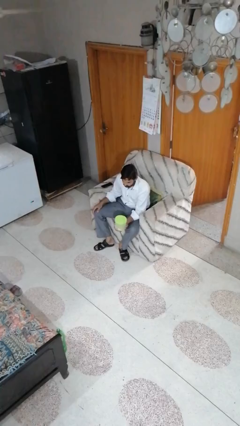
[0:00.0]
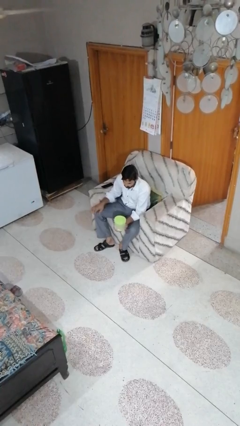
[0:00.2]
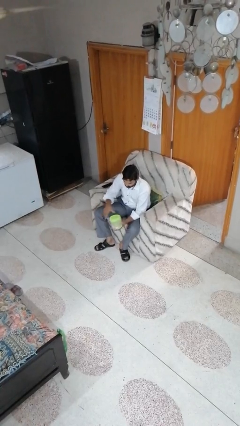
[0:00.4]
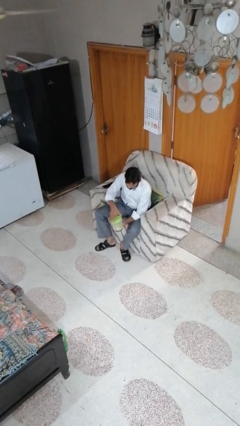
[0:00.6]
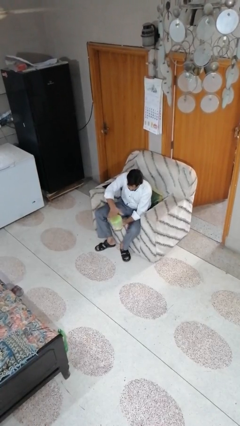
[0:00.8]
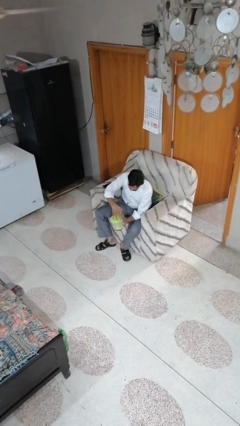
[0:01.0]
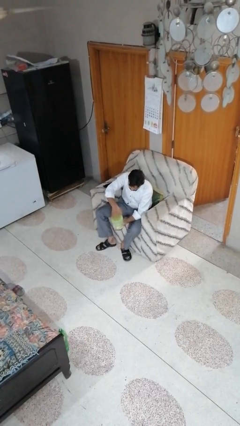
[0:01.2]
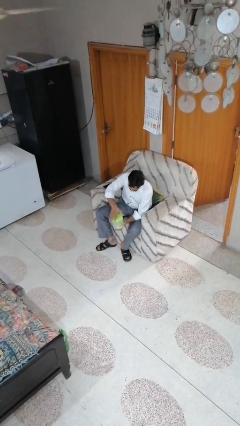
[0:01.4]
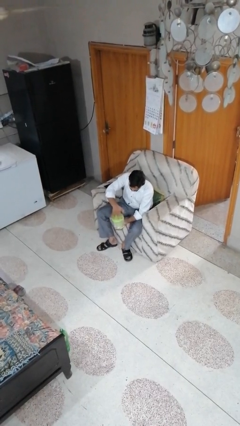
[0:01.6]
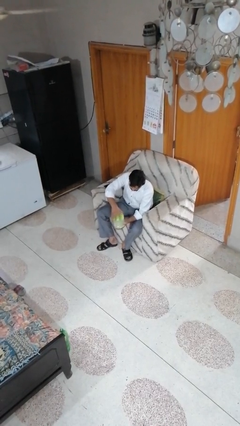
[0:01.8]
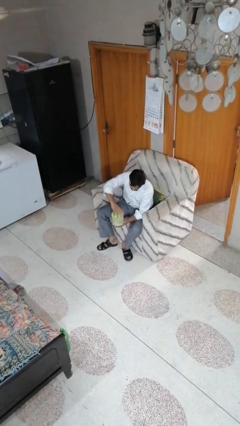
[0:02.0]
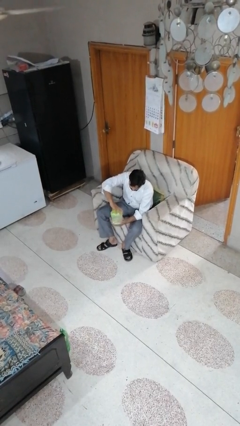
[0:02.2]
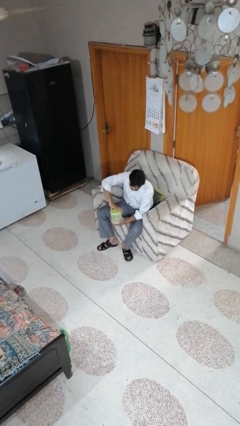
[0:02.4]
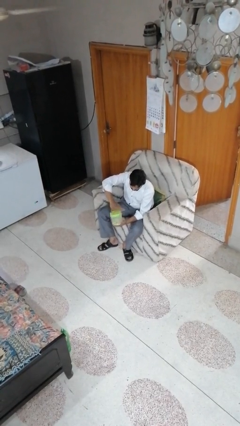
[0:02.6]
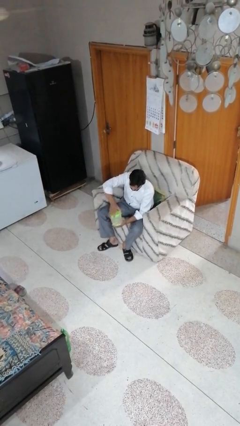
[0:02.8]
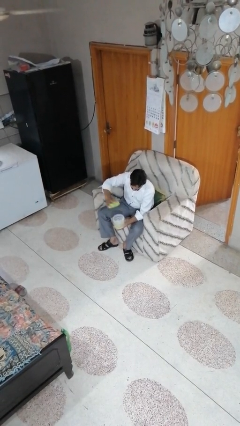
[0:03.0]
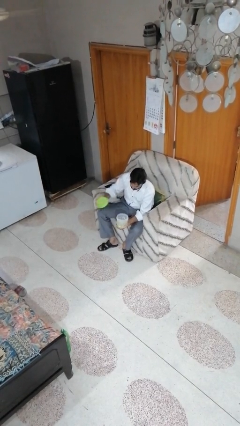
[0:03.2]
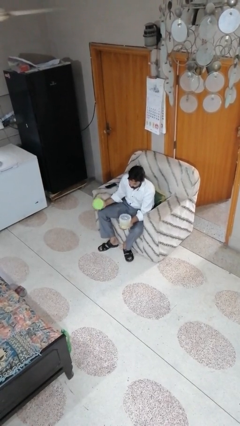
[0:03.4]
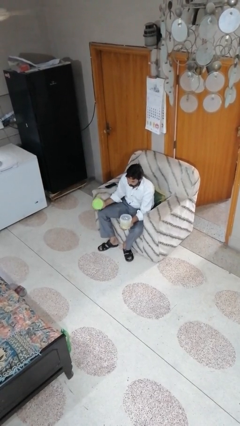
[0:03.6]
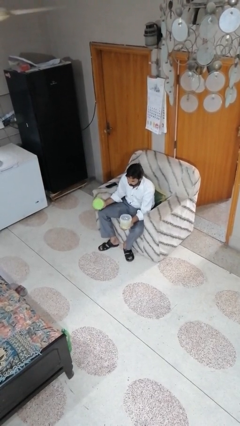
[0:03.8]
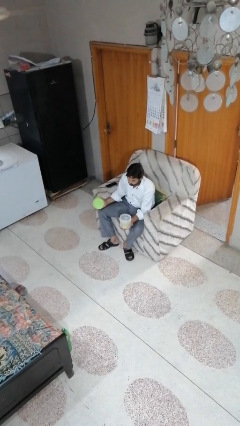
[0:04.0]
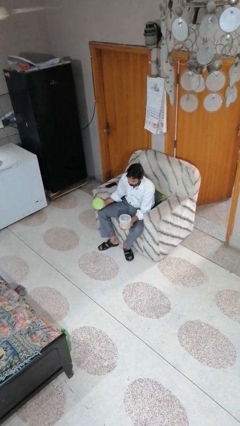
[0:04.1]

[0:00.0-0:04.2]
person opens jar

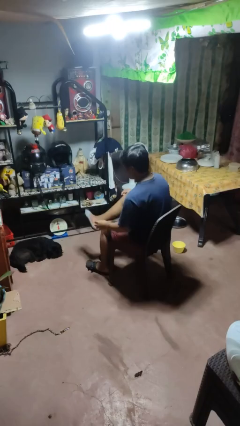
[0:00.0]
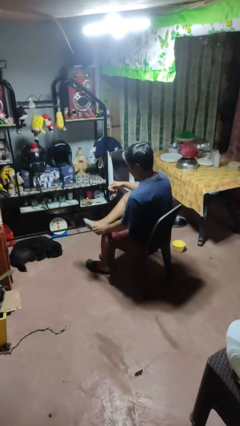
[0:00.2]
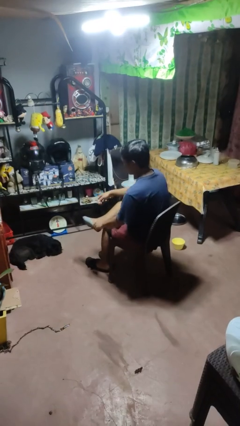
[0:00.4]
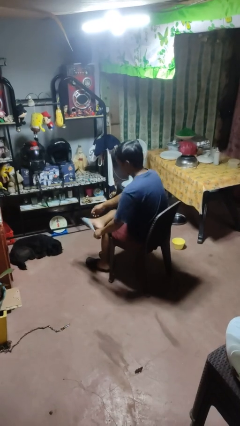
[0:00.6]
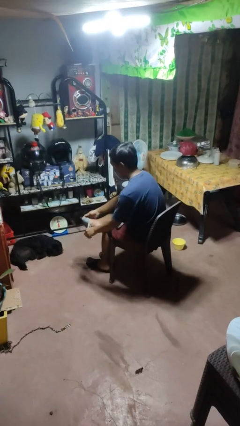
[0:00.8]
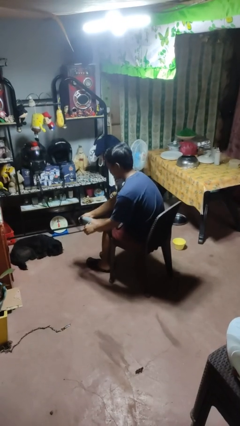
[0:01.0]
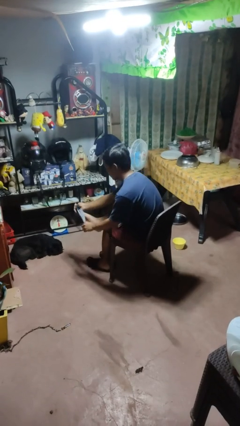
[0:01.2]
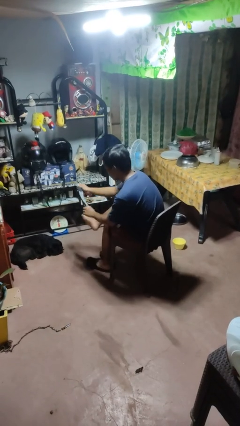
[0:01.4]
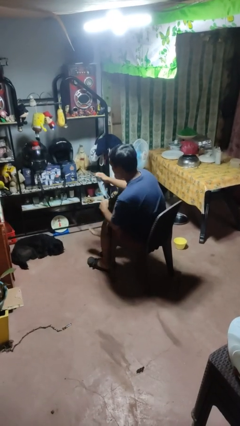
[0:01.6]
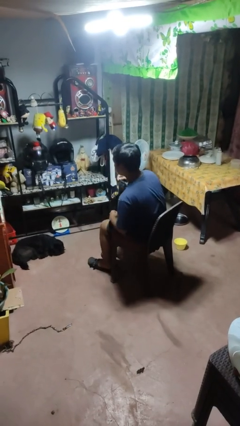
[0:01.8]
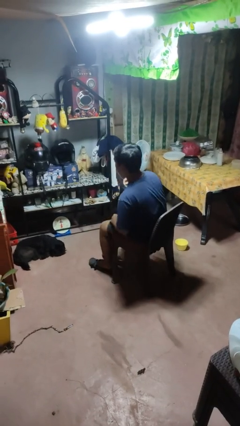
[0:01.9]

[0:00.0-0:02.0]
person takes off socks

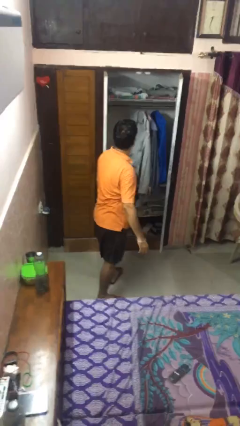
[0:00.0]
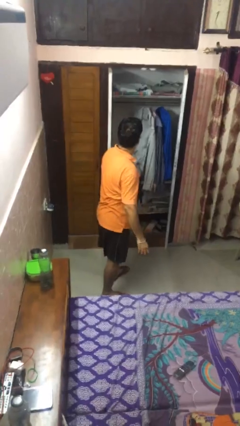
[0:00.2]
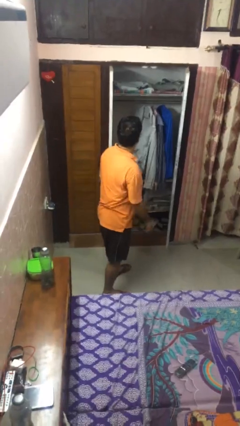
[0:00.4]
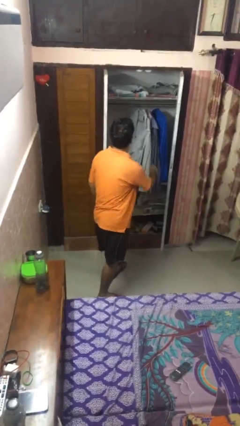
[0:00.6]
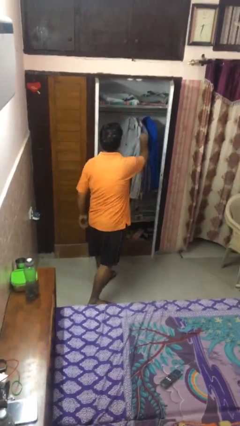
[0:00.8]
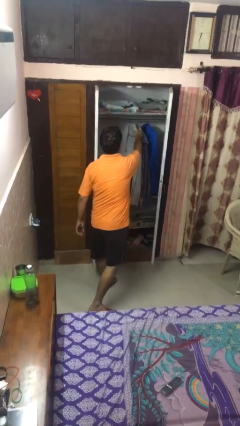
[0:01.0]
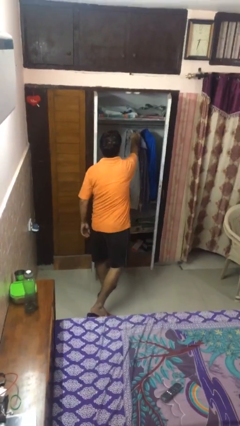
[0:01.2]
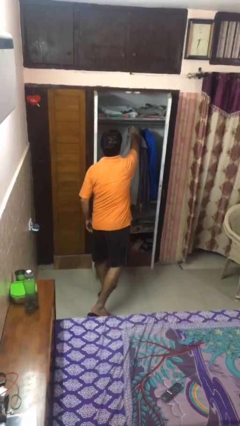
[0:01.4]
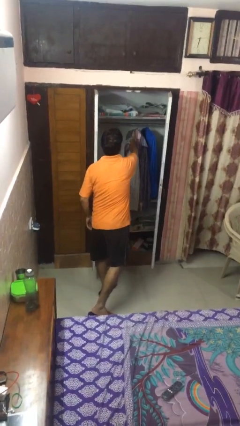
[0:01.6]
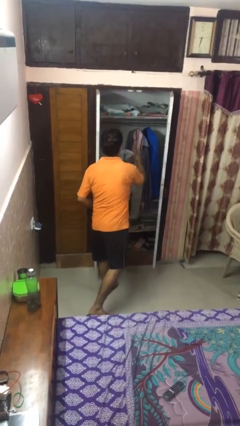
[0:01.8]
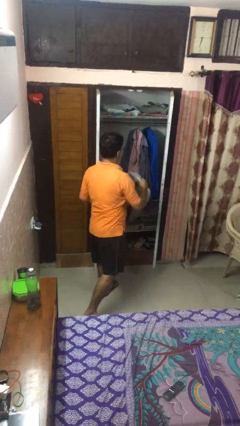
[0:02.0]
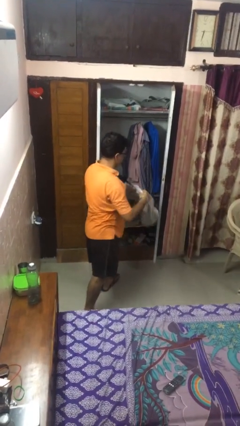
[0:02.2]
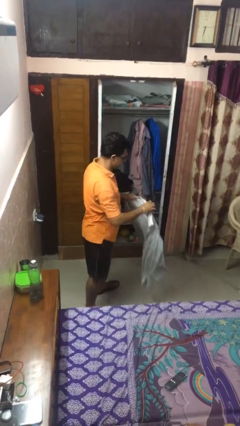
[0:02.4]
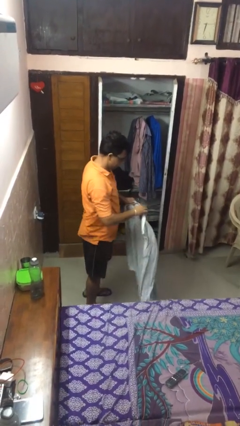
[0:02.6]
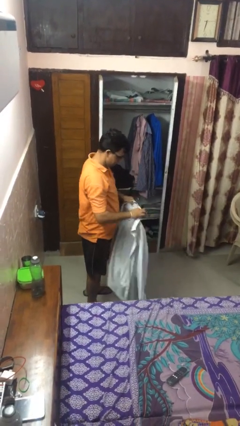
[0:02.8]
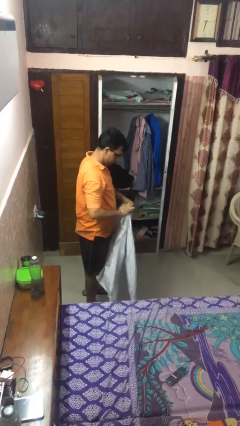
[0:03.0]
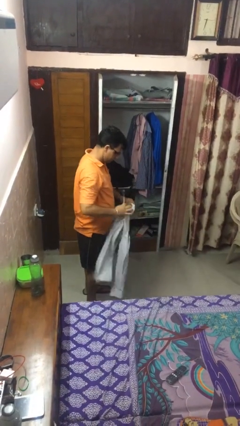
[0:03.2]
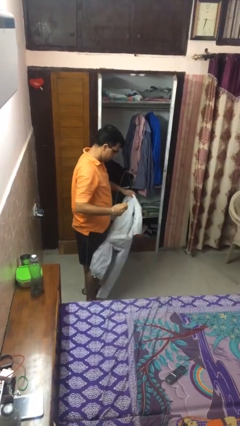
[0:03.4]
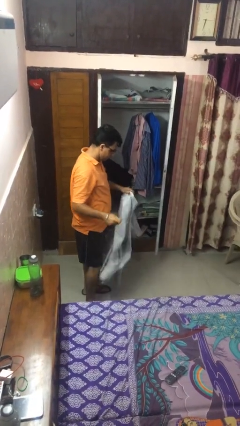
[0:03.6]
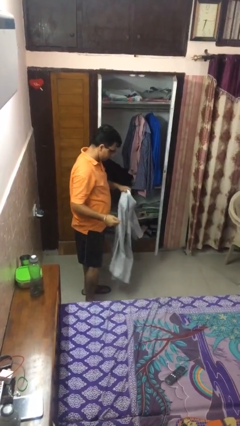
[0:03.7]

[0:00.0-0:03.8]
person takes clothes from closet

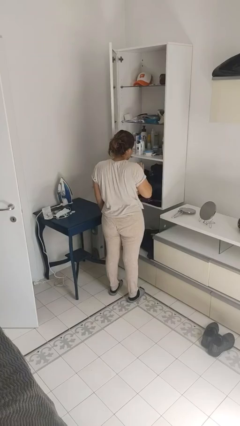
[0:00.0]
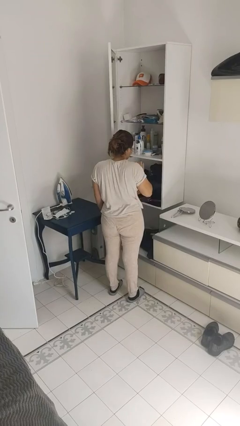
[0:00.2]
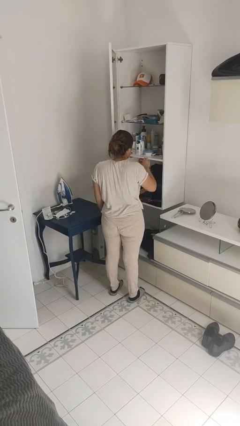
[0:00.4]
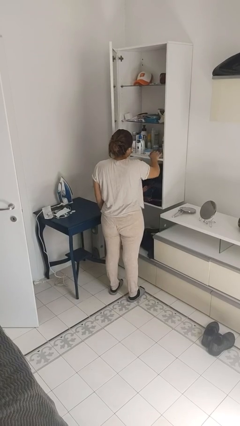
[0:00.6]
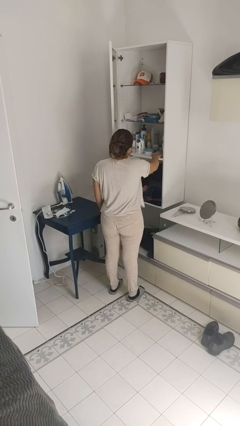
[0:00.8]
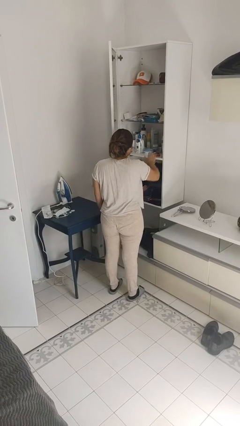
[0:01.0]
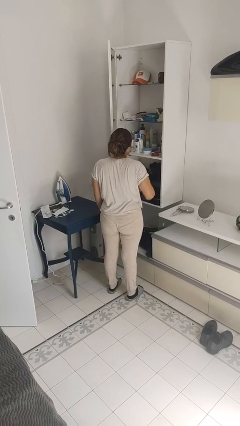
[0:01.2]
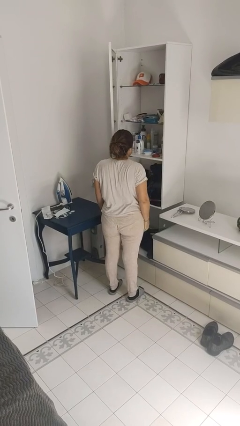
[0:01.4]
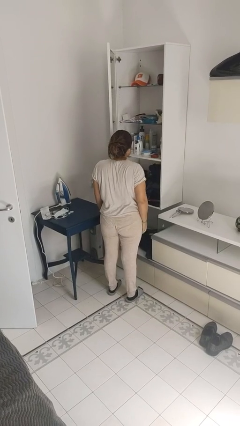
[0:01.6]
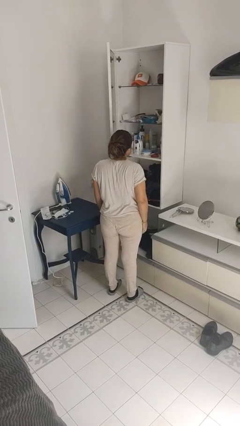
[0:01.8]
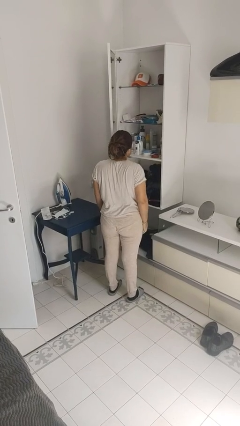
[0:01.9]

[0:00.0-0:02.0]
person puts down object on shelf

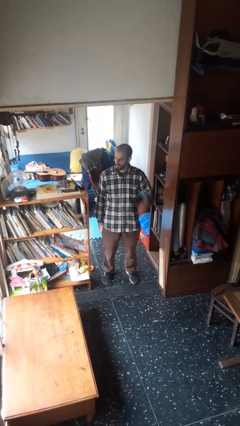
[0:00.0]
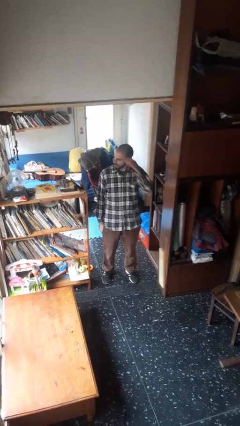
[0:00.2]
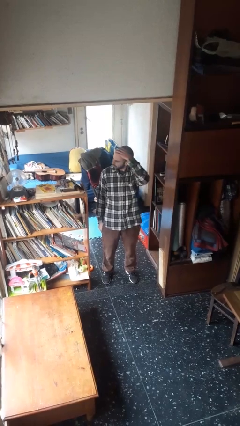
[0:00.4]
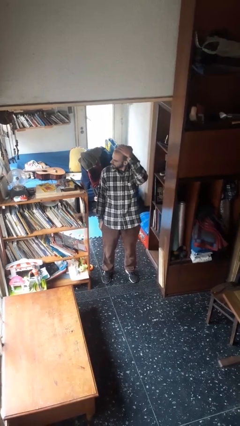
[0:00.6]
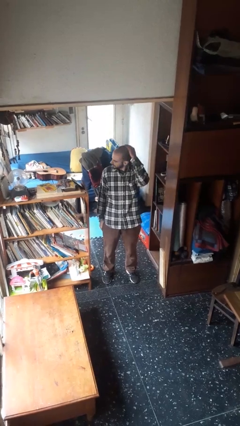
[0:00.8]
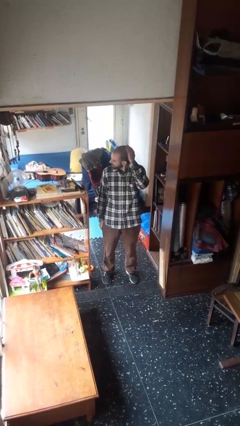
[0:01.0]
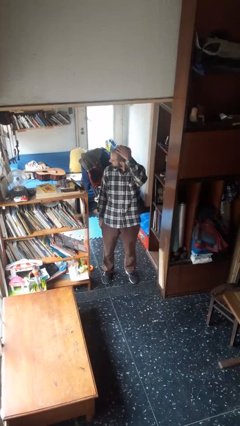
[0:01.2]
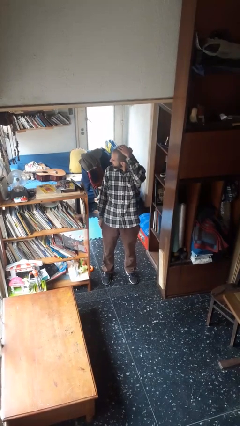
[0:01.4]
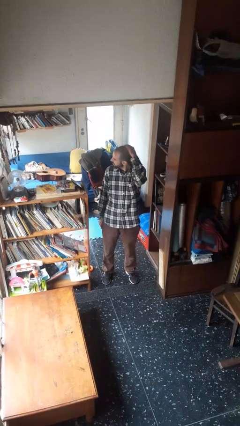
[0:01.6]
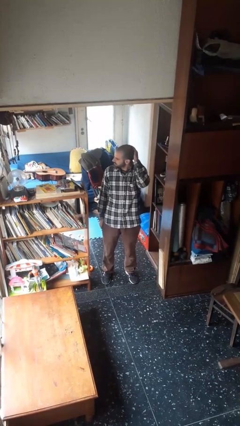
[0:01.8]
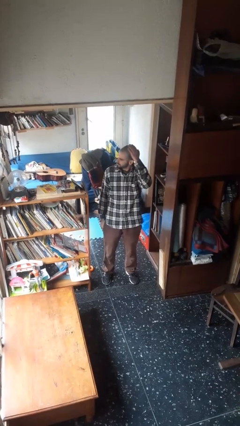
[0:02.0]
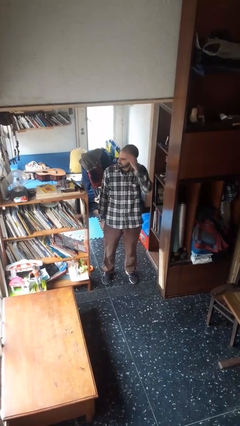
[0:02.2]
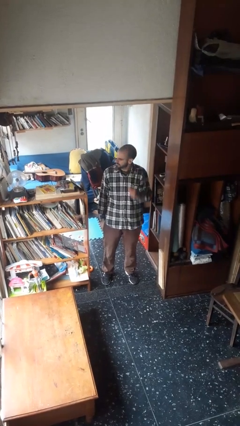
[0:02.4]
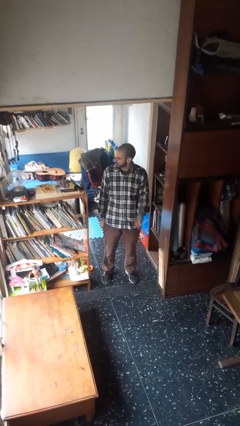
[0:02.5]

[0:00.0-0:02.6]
person pats head

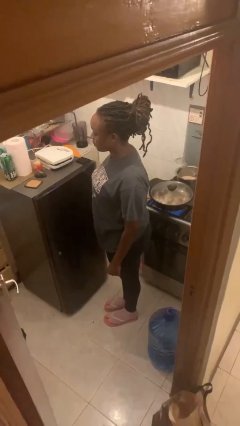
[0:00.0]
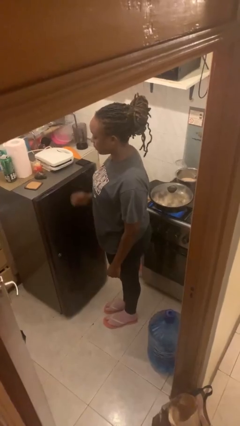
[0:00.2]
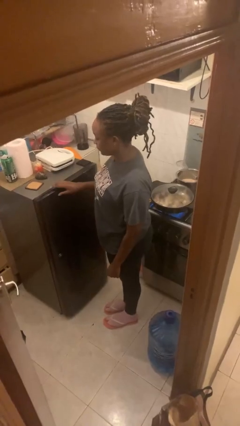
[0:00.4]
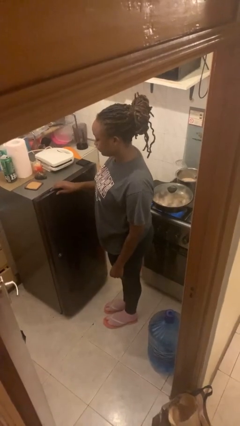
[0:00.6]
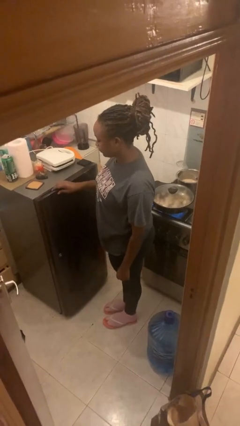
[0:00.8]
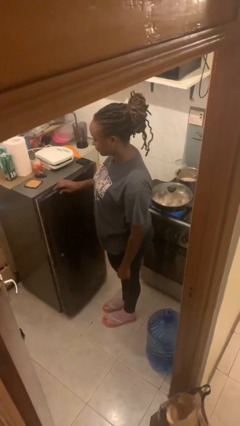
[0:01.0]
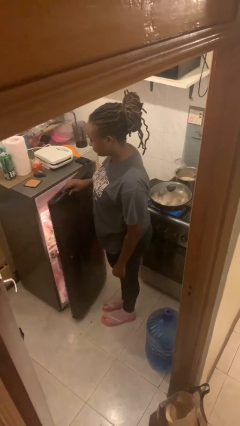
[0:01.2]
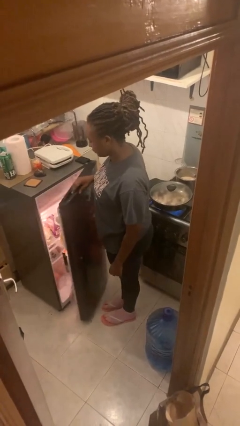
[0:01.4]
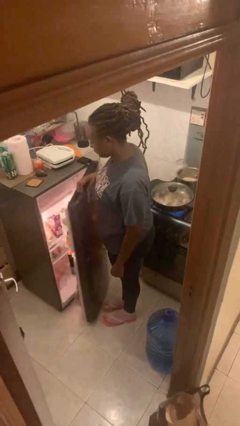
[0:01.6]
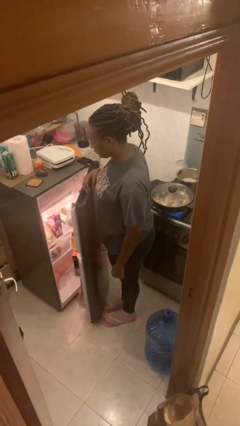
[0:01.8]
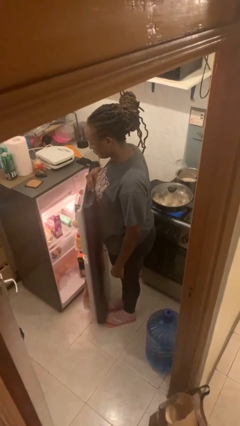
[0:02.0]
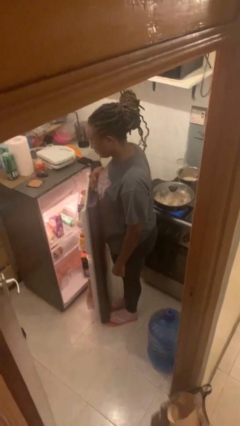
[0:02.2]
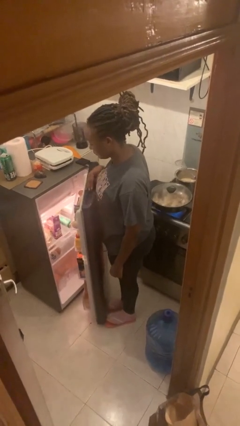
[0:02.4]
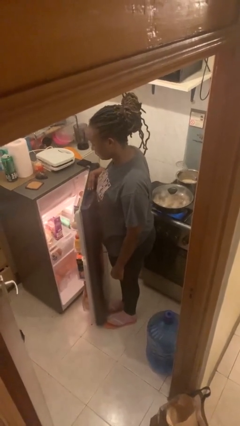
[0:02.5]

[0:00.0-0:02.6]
person opens refrigerator
